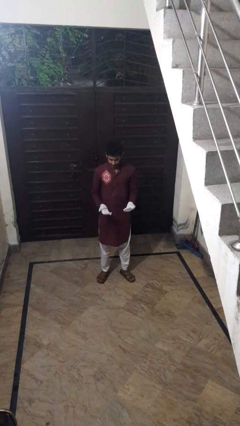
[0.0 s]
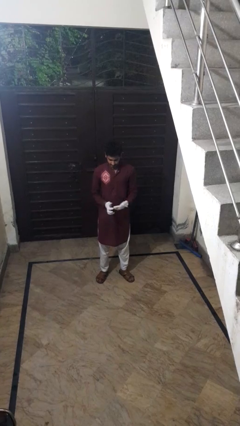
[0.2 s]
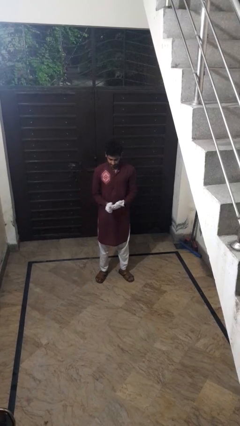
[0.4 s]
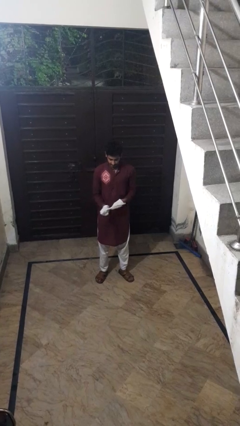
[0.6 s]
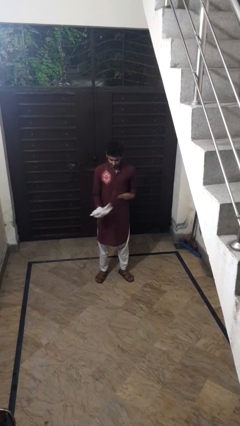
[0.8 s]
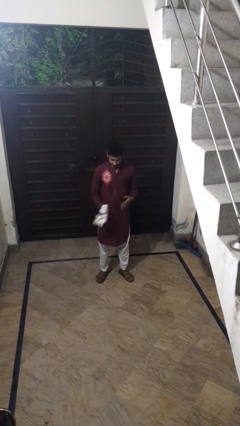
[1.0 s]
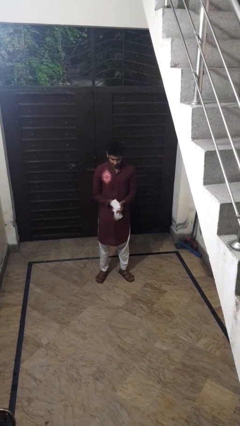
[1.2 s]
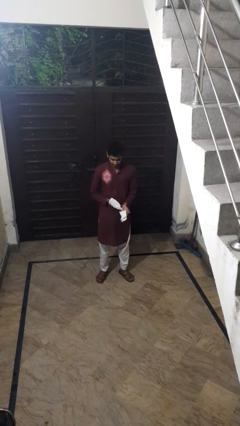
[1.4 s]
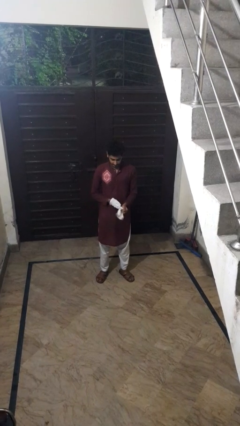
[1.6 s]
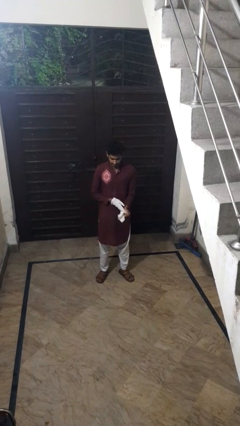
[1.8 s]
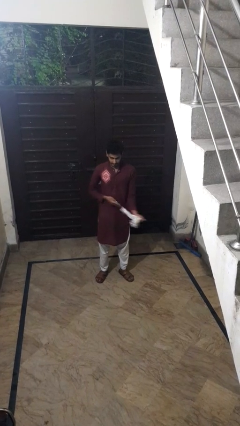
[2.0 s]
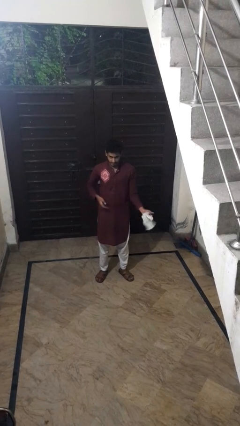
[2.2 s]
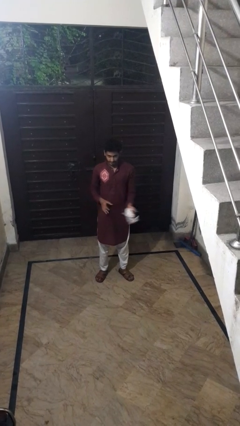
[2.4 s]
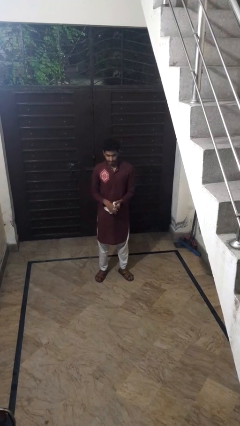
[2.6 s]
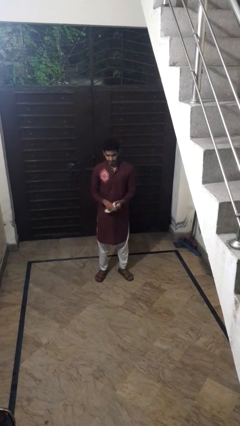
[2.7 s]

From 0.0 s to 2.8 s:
person takes off gloves

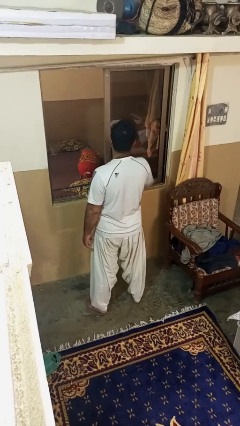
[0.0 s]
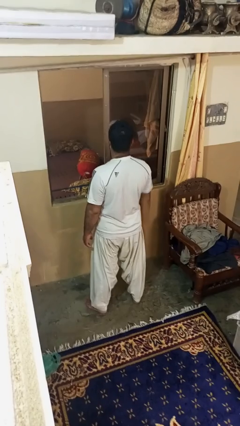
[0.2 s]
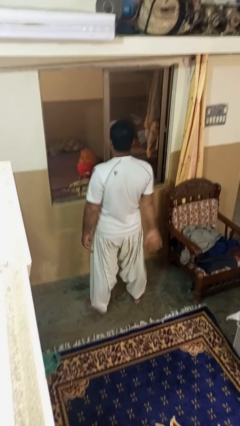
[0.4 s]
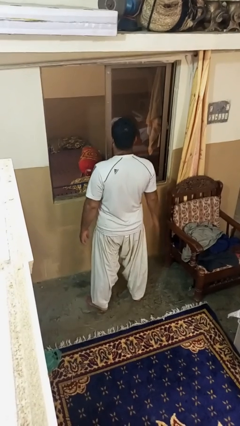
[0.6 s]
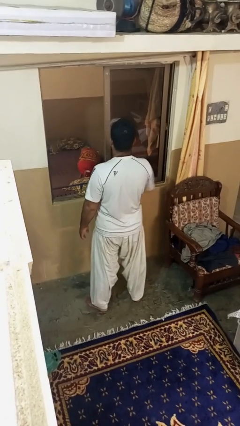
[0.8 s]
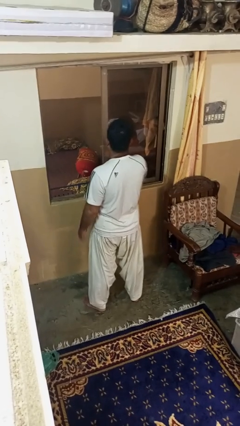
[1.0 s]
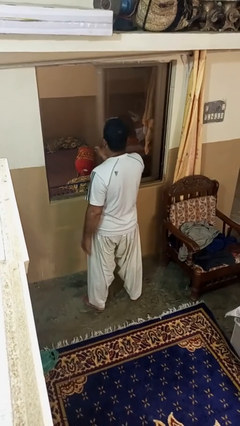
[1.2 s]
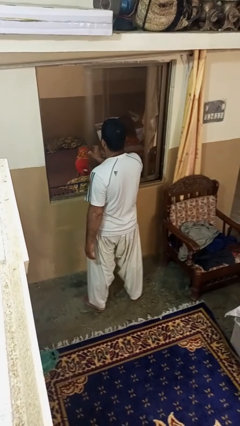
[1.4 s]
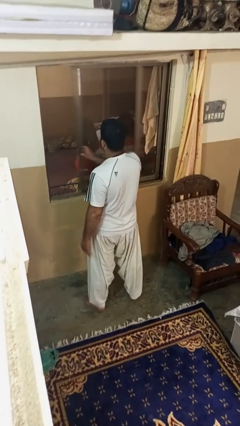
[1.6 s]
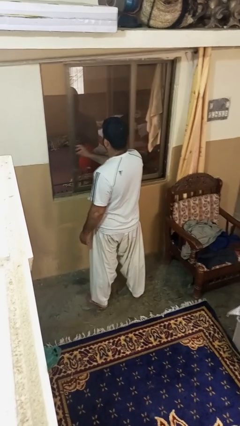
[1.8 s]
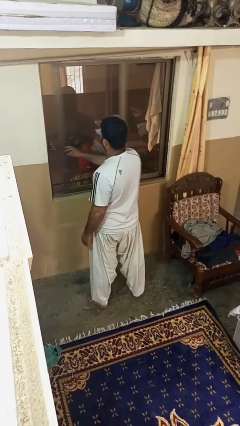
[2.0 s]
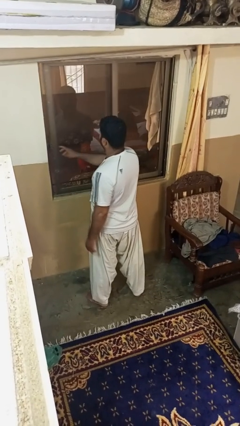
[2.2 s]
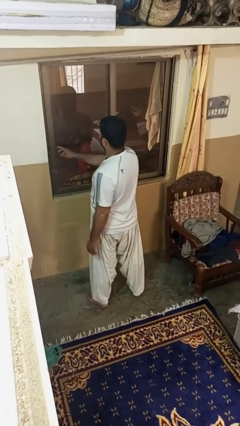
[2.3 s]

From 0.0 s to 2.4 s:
person closes home window

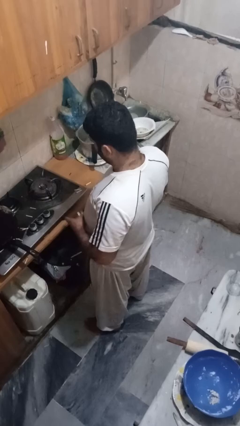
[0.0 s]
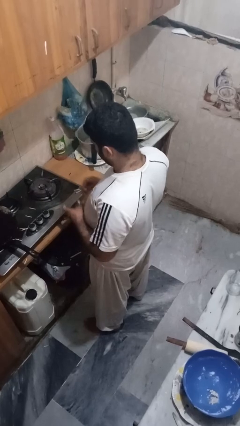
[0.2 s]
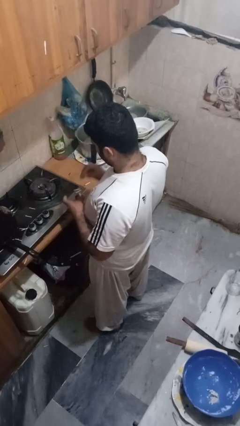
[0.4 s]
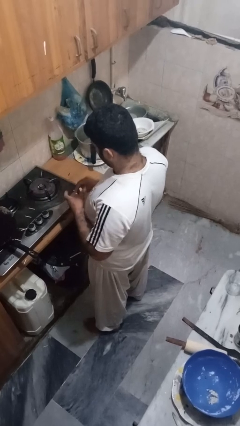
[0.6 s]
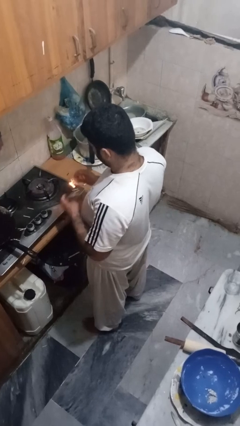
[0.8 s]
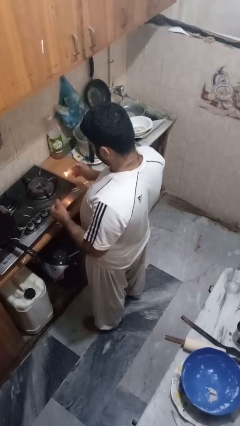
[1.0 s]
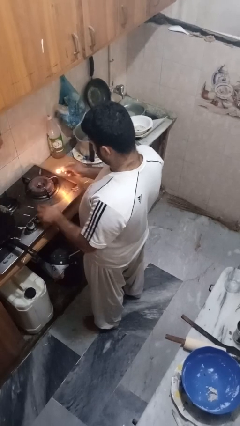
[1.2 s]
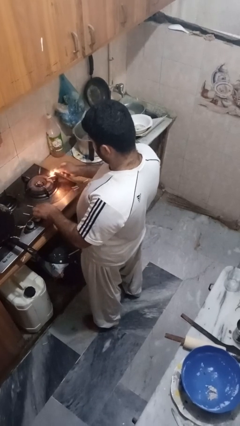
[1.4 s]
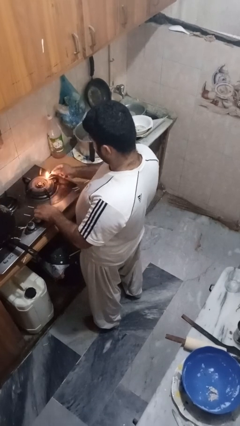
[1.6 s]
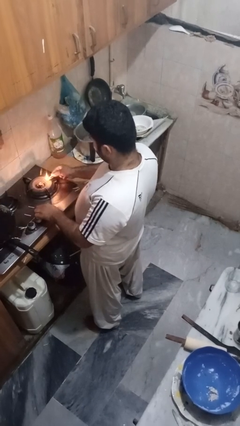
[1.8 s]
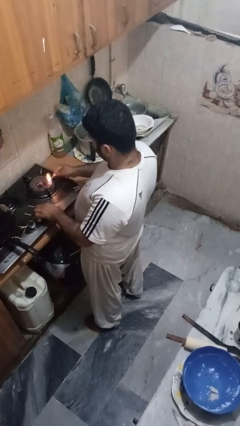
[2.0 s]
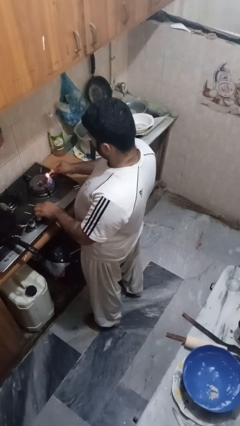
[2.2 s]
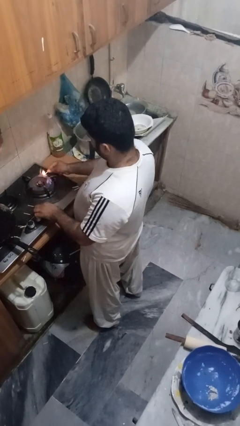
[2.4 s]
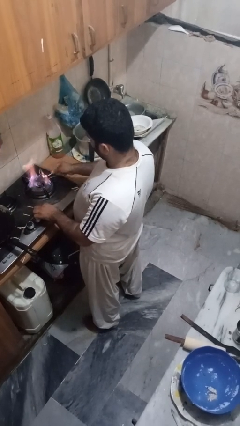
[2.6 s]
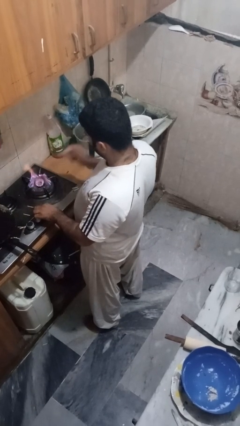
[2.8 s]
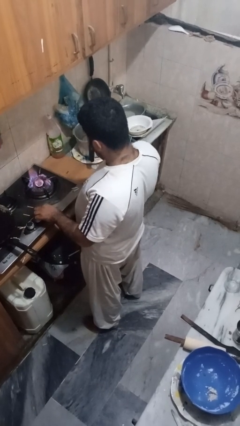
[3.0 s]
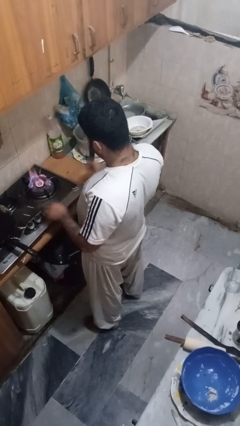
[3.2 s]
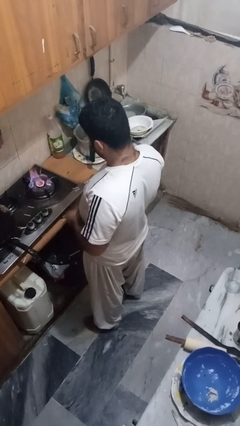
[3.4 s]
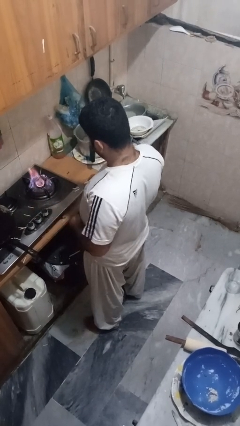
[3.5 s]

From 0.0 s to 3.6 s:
person turns on stovetop

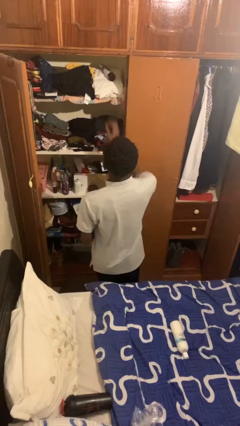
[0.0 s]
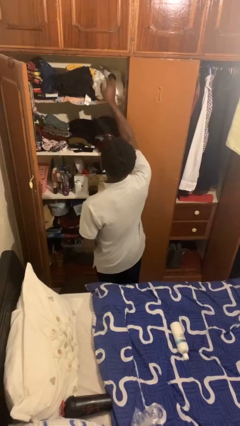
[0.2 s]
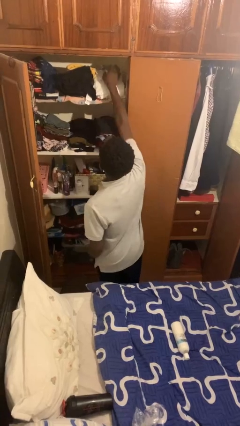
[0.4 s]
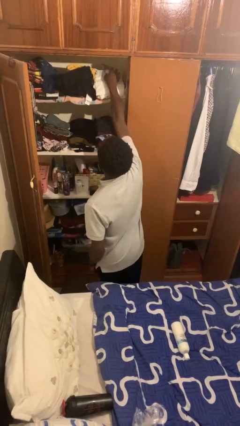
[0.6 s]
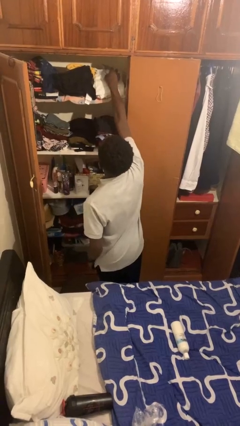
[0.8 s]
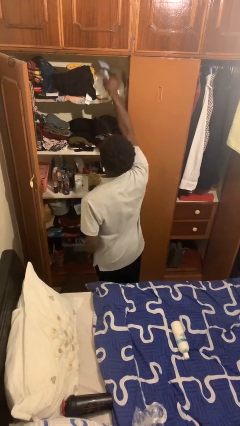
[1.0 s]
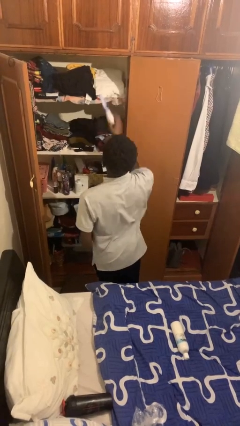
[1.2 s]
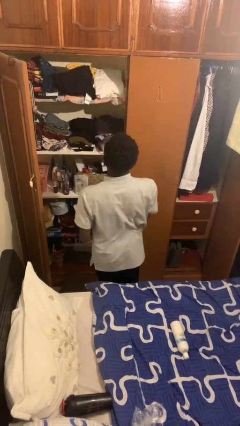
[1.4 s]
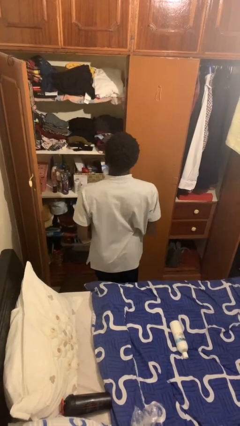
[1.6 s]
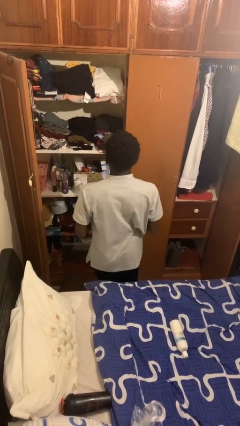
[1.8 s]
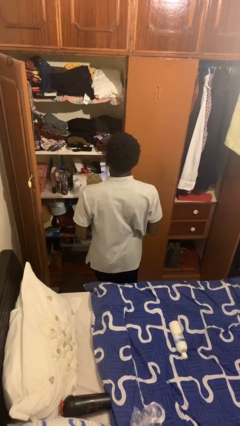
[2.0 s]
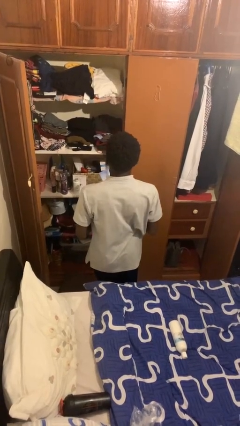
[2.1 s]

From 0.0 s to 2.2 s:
person picks up object from shelf

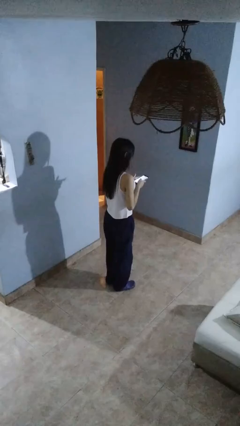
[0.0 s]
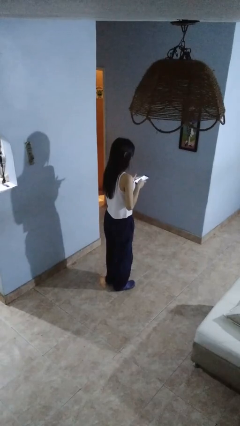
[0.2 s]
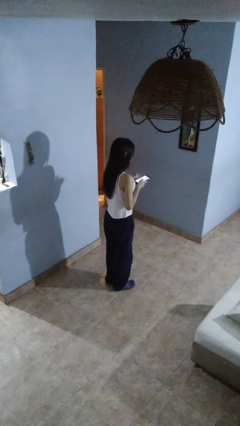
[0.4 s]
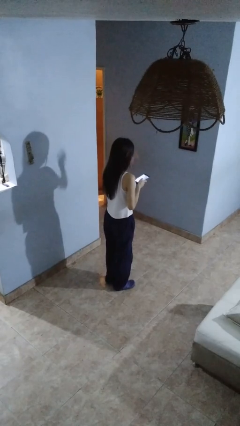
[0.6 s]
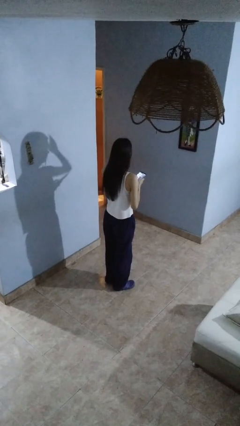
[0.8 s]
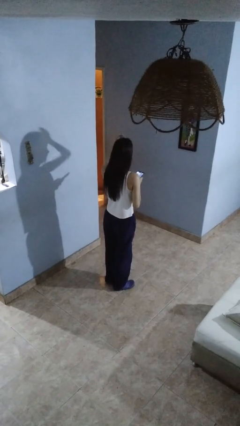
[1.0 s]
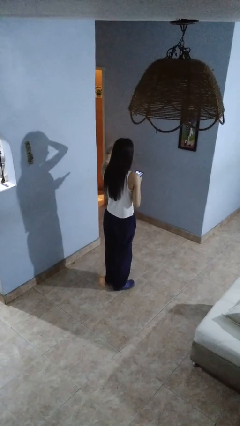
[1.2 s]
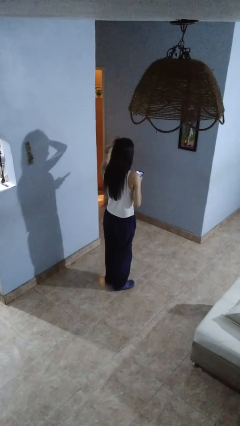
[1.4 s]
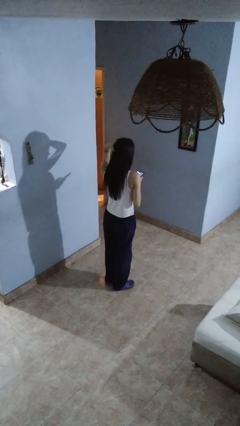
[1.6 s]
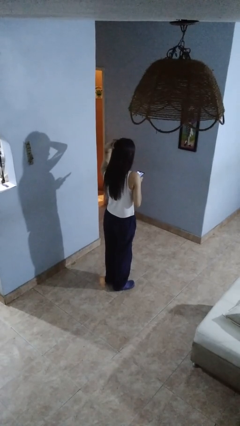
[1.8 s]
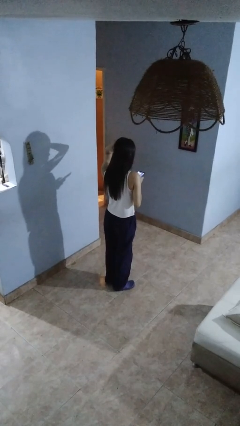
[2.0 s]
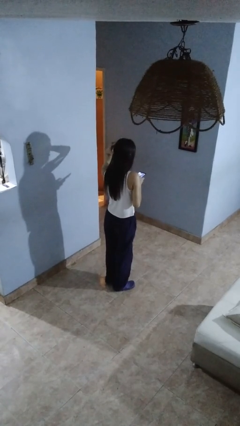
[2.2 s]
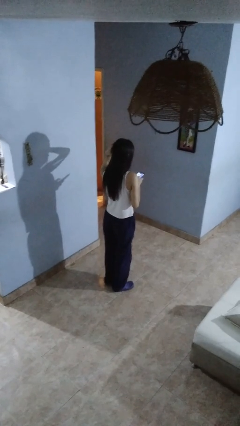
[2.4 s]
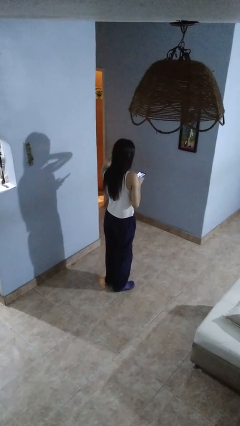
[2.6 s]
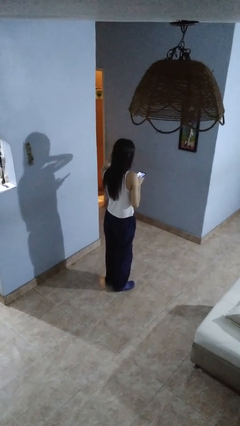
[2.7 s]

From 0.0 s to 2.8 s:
person scratches face

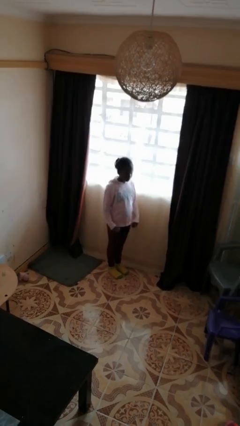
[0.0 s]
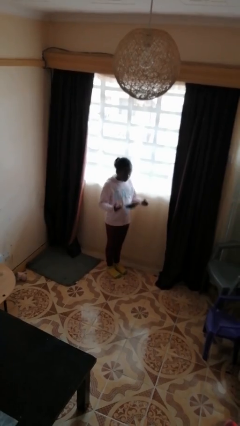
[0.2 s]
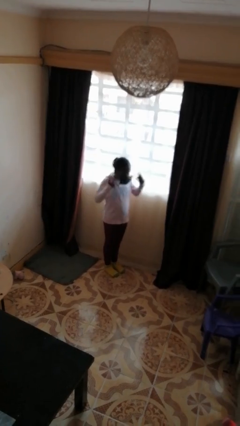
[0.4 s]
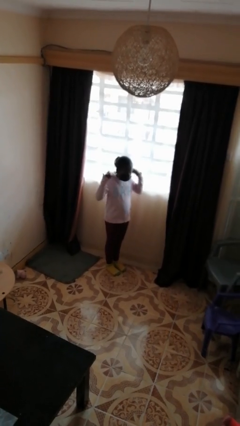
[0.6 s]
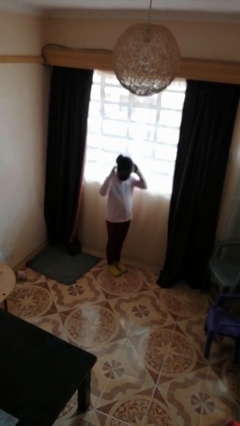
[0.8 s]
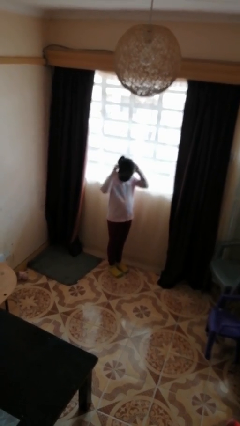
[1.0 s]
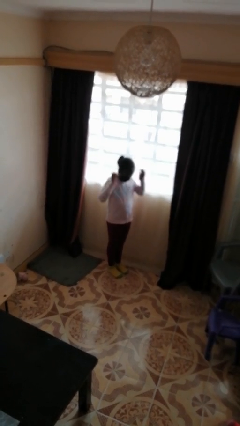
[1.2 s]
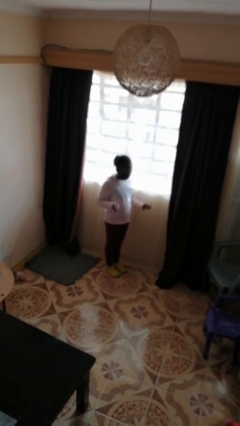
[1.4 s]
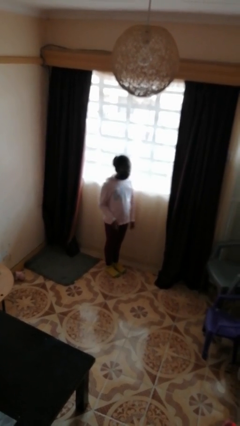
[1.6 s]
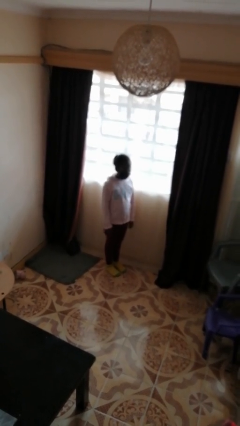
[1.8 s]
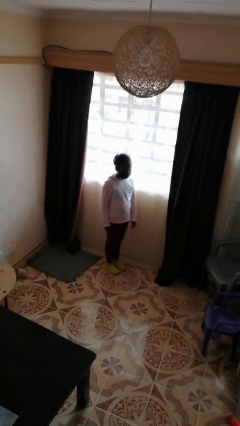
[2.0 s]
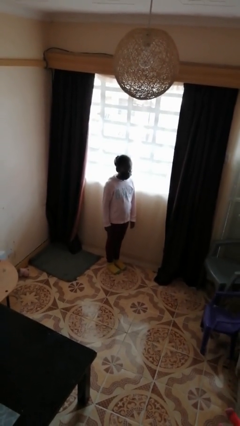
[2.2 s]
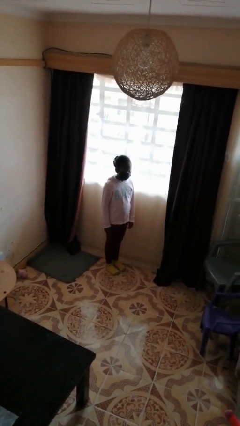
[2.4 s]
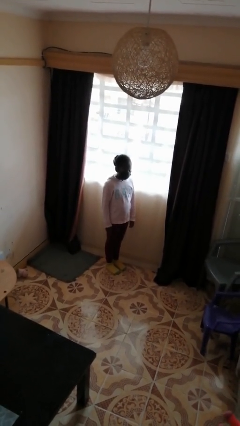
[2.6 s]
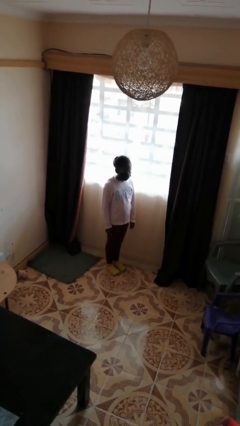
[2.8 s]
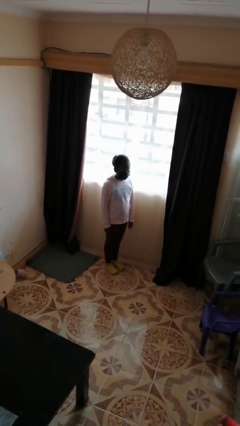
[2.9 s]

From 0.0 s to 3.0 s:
person puts on facemask

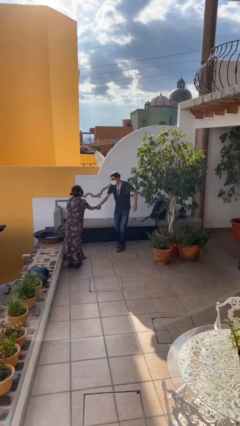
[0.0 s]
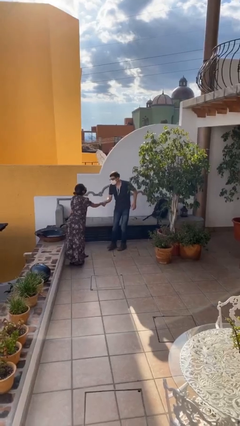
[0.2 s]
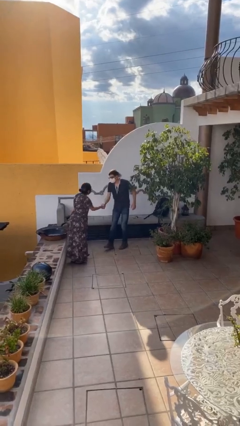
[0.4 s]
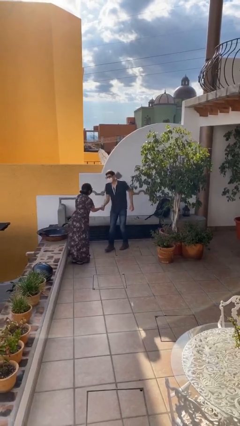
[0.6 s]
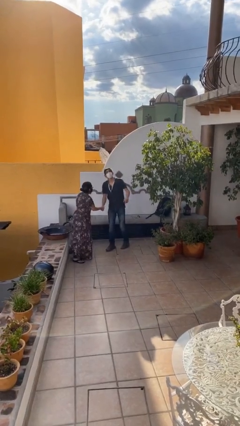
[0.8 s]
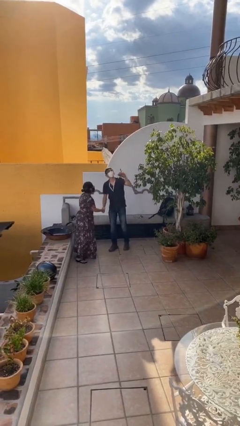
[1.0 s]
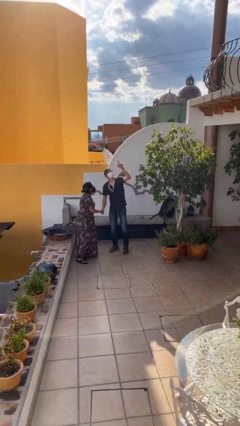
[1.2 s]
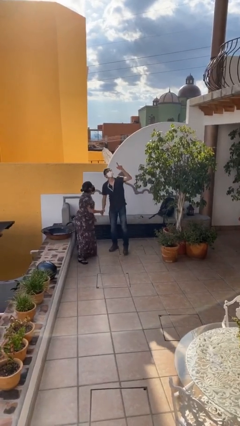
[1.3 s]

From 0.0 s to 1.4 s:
person shakes hand
